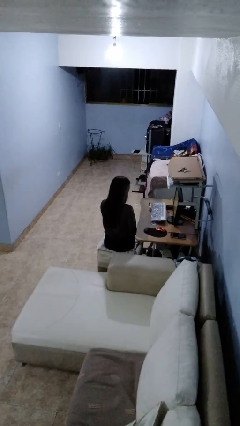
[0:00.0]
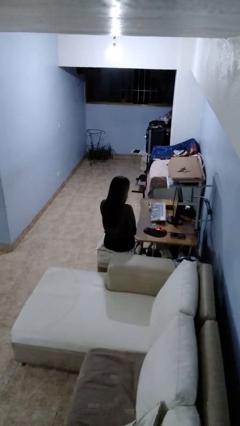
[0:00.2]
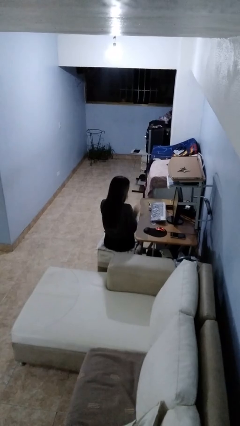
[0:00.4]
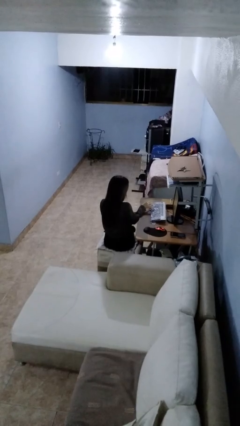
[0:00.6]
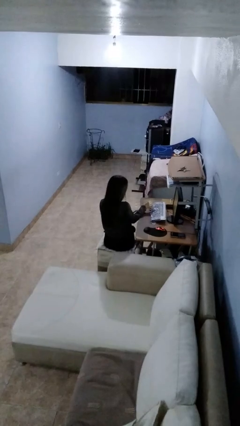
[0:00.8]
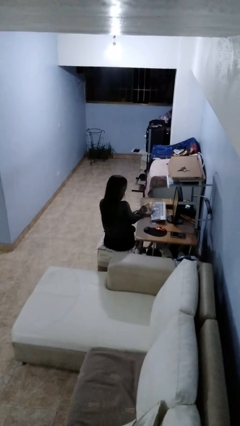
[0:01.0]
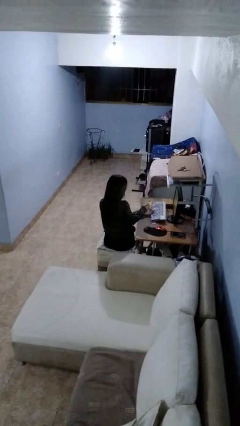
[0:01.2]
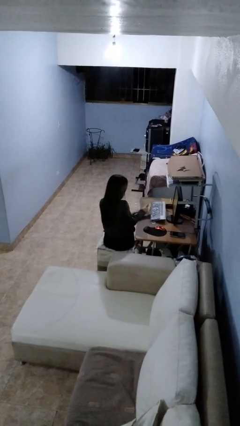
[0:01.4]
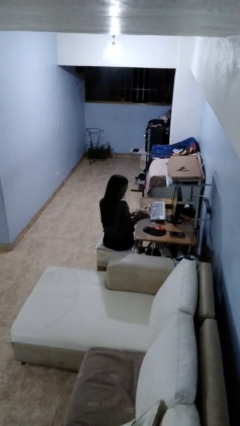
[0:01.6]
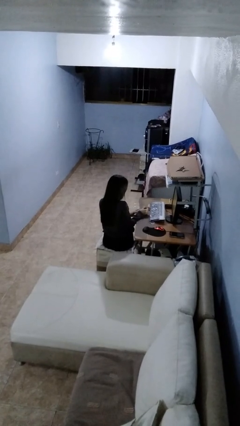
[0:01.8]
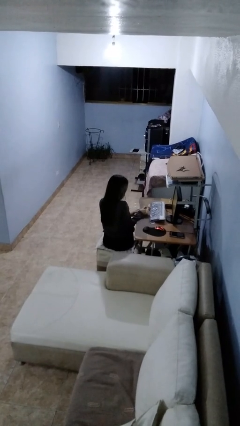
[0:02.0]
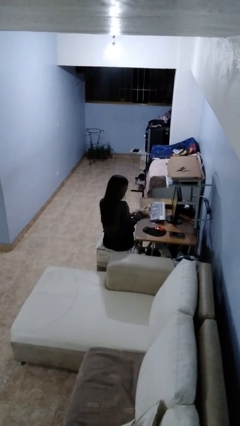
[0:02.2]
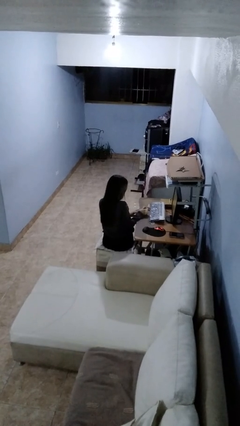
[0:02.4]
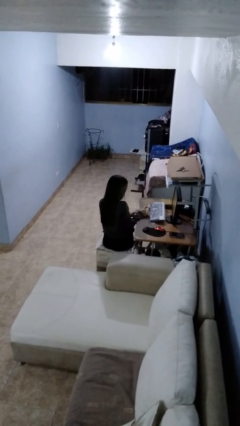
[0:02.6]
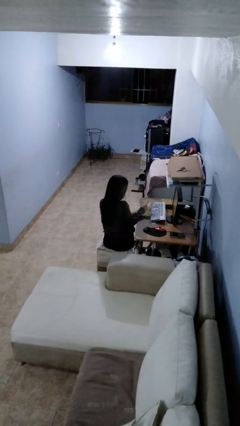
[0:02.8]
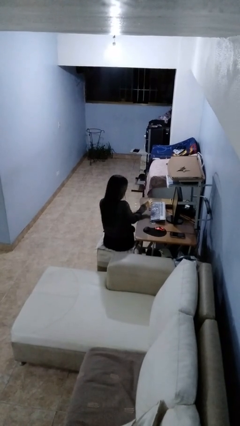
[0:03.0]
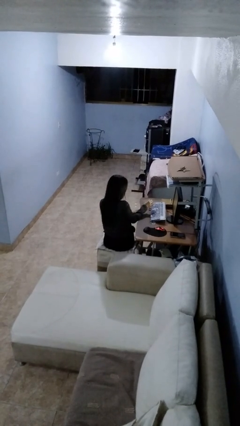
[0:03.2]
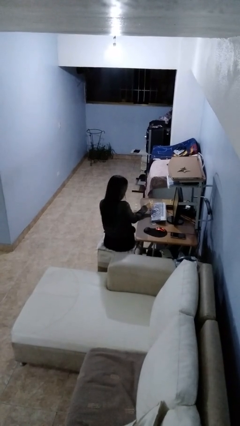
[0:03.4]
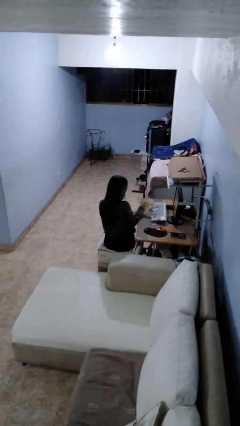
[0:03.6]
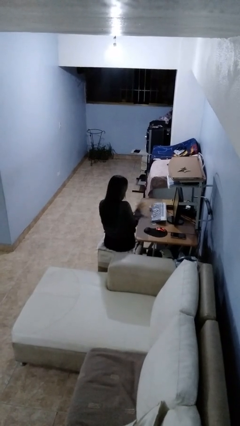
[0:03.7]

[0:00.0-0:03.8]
person paints fingernails

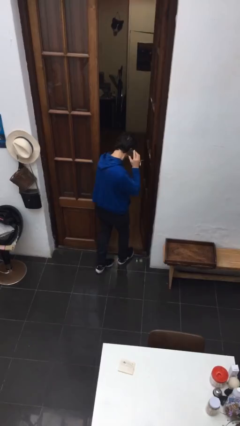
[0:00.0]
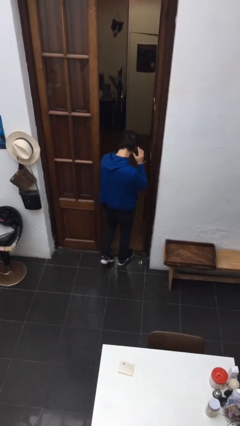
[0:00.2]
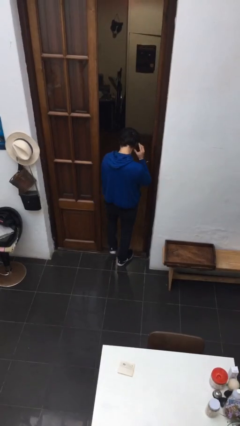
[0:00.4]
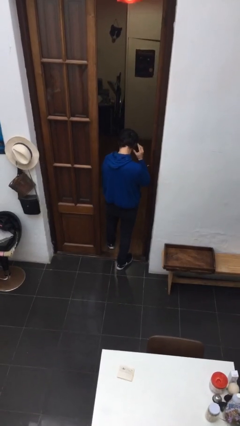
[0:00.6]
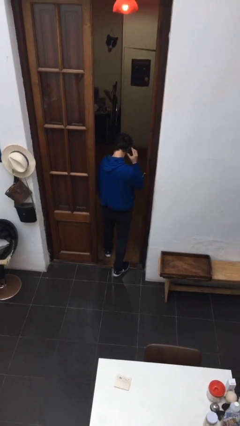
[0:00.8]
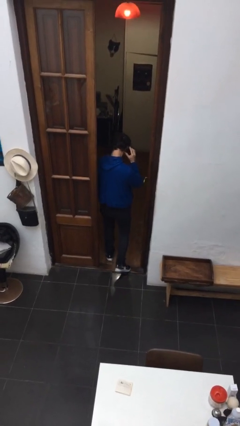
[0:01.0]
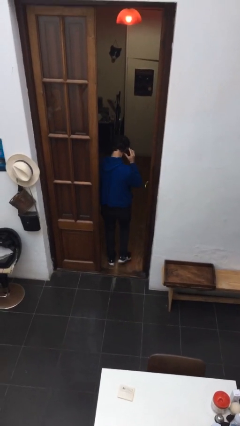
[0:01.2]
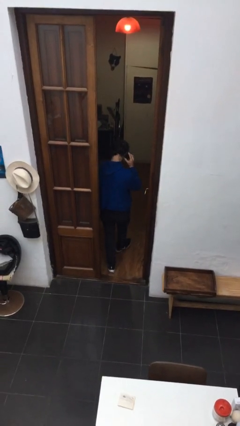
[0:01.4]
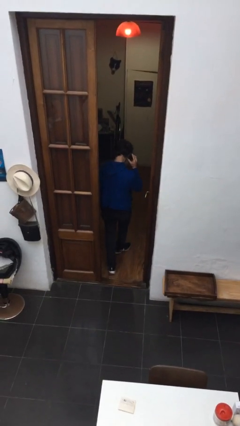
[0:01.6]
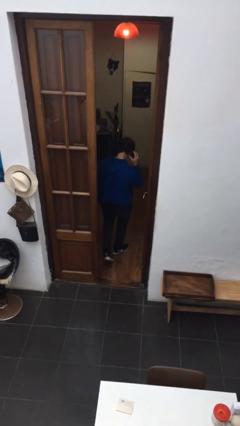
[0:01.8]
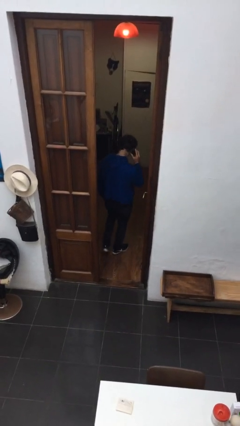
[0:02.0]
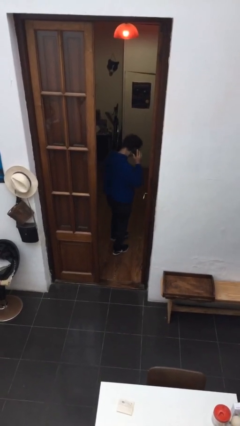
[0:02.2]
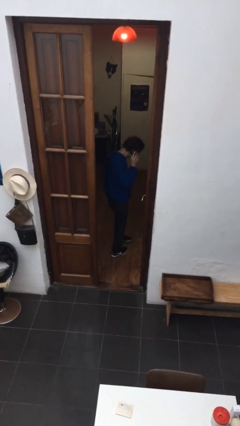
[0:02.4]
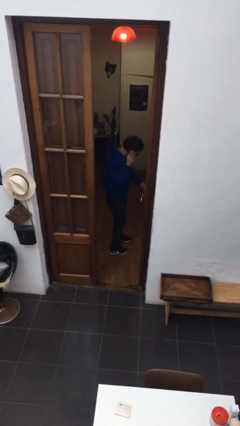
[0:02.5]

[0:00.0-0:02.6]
person exits scene through structure

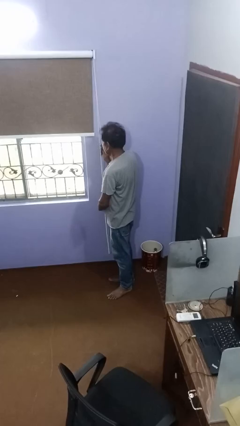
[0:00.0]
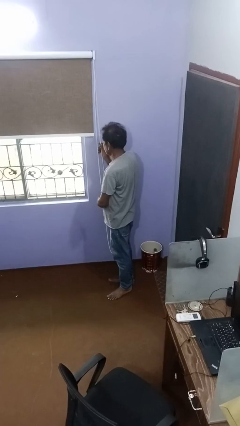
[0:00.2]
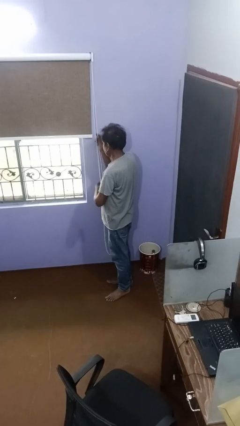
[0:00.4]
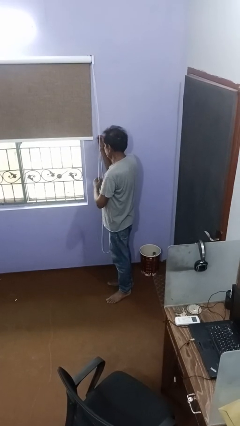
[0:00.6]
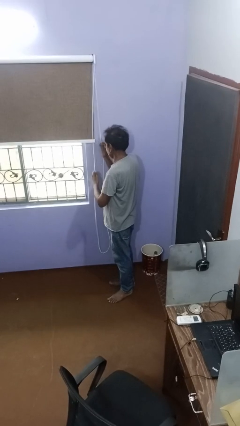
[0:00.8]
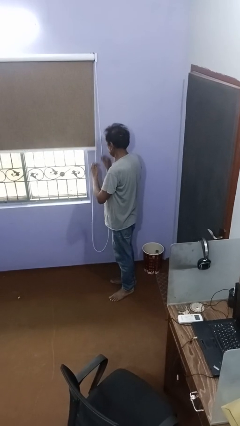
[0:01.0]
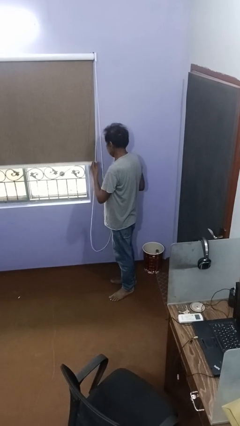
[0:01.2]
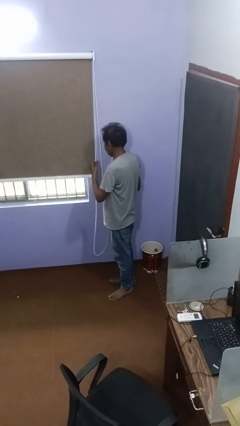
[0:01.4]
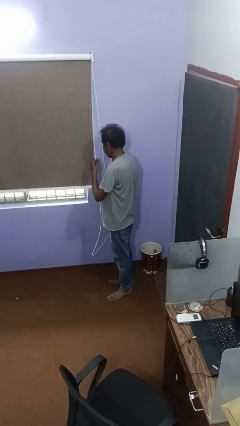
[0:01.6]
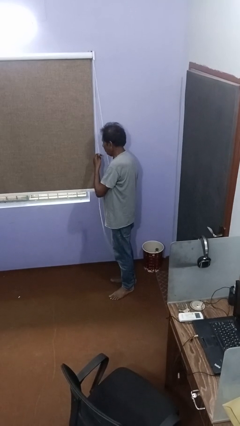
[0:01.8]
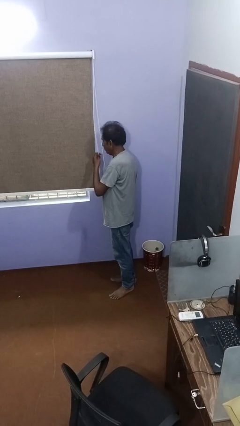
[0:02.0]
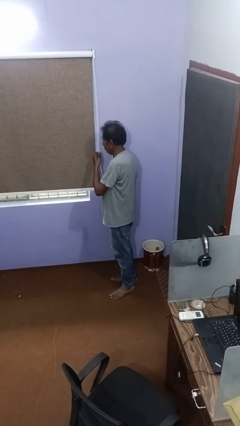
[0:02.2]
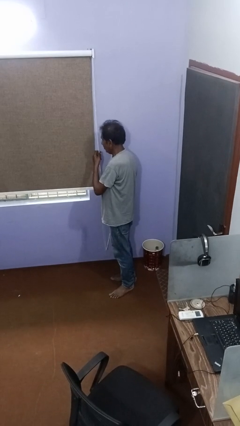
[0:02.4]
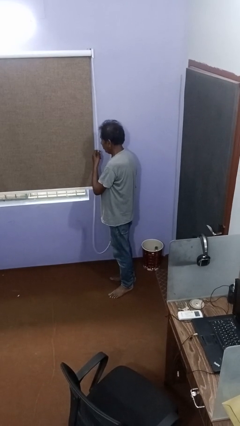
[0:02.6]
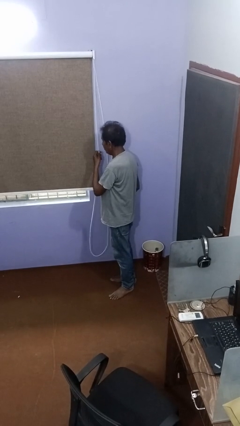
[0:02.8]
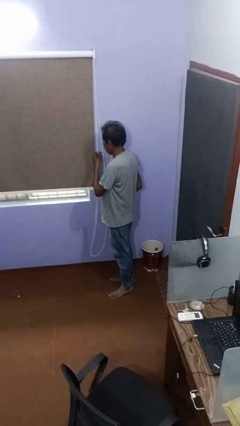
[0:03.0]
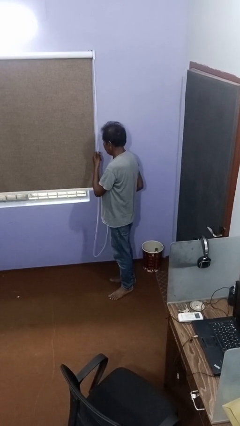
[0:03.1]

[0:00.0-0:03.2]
person closes curtains

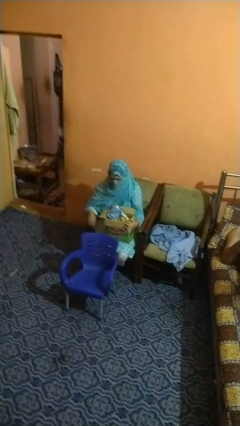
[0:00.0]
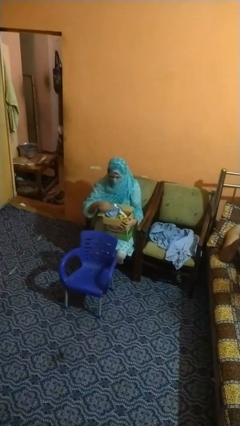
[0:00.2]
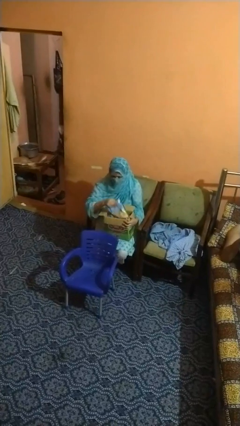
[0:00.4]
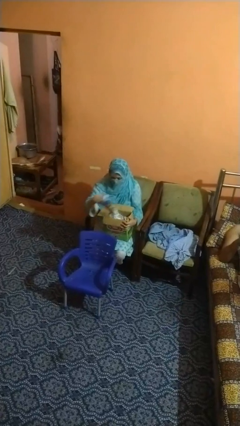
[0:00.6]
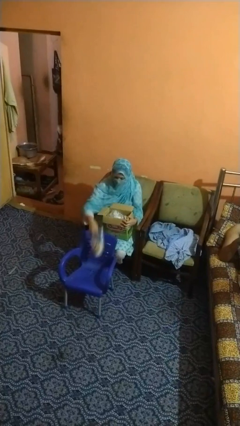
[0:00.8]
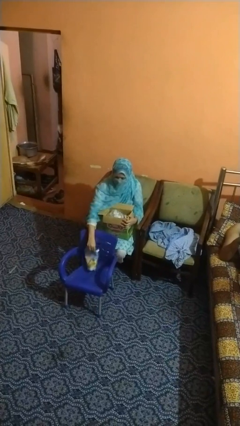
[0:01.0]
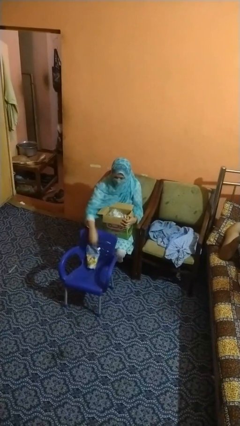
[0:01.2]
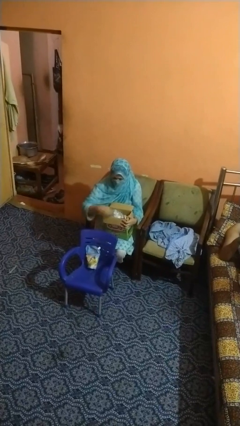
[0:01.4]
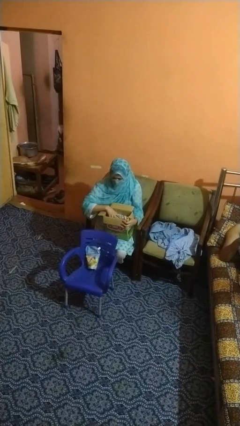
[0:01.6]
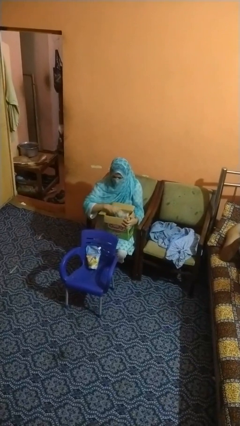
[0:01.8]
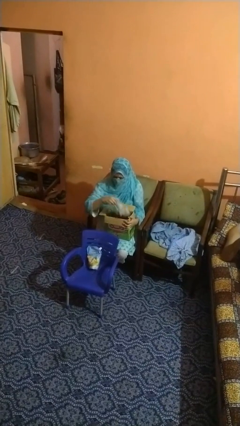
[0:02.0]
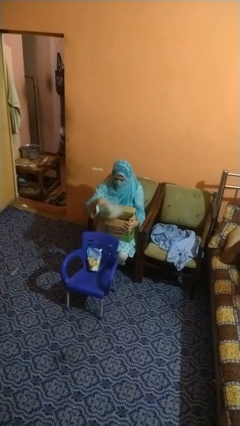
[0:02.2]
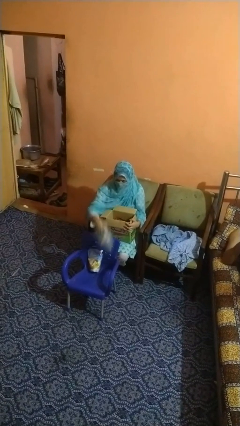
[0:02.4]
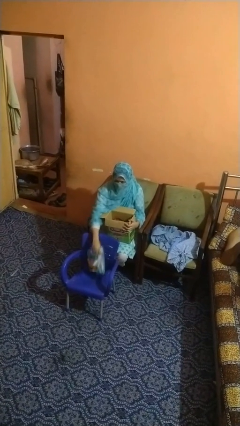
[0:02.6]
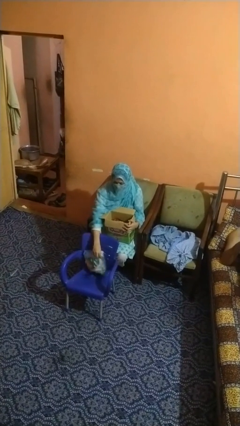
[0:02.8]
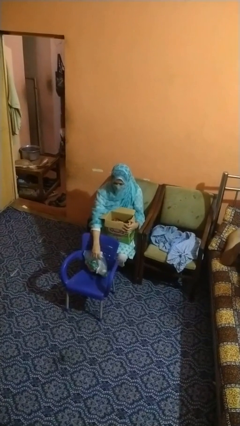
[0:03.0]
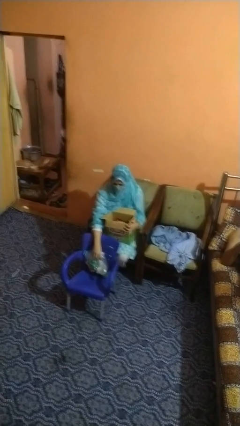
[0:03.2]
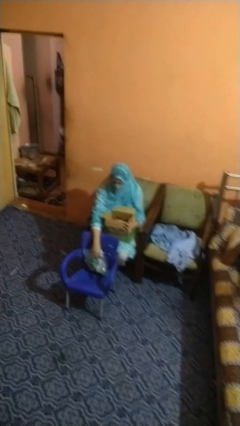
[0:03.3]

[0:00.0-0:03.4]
person takes object from box

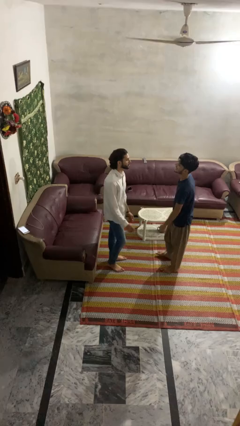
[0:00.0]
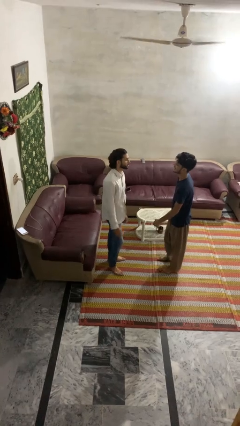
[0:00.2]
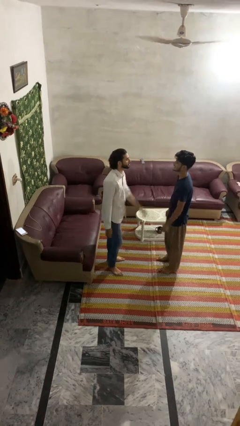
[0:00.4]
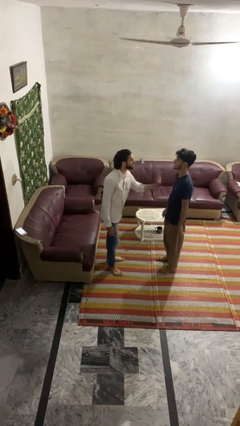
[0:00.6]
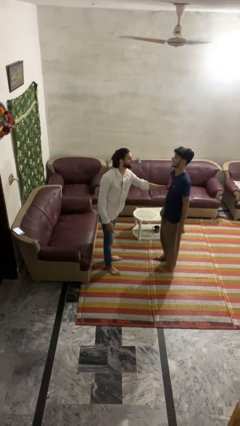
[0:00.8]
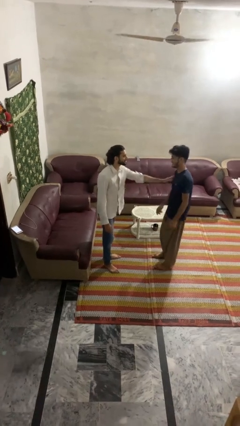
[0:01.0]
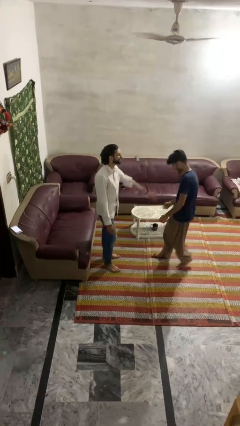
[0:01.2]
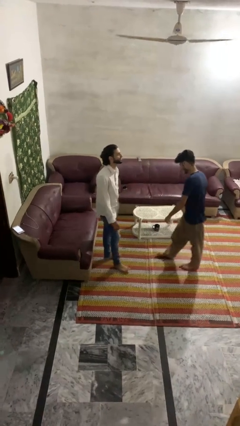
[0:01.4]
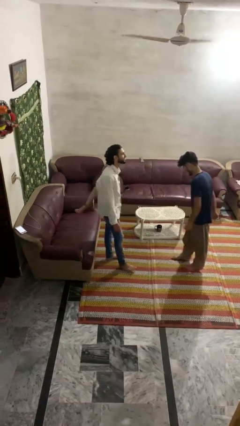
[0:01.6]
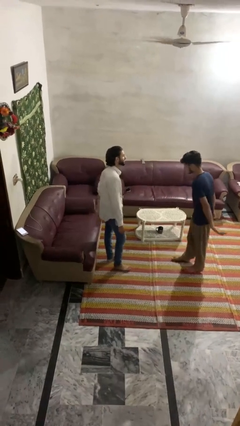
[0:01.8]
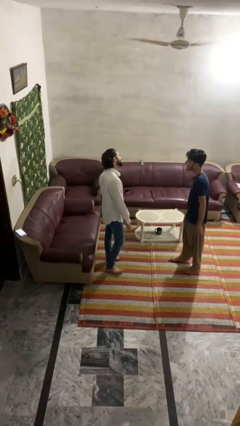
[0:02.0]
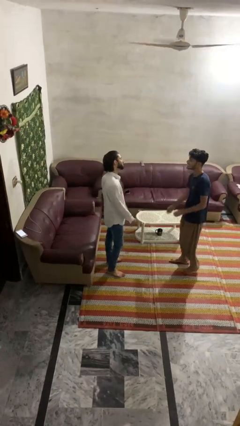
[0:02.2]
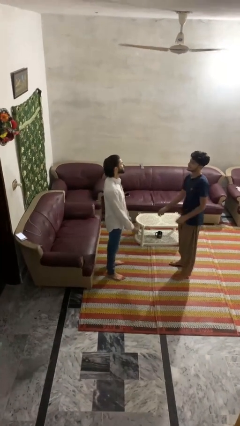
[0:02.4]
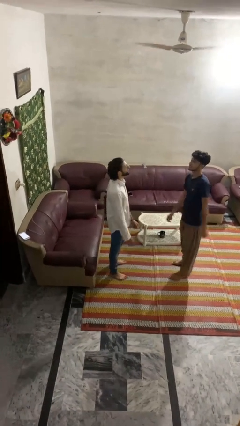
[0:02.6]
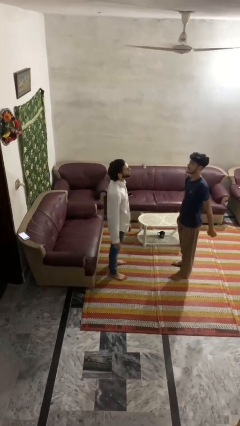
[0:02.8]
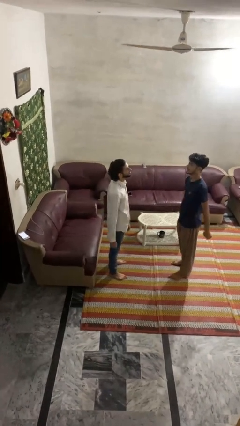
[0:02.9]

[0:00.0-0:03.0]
person shoves person

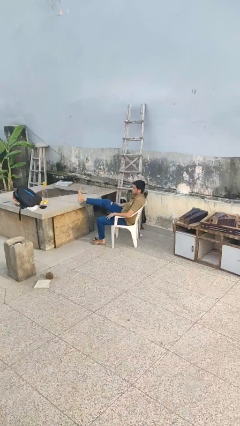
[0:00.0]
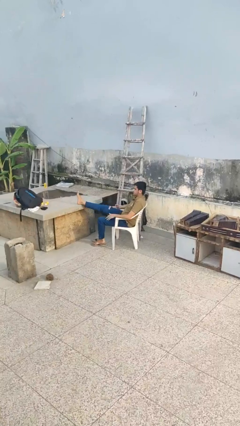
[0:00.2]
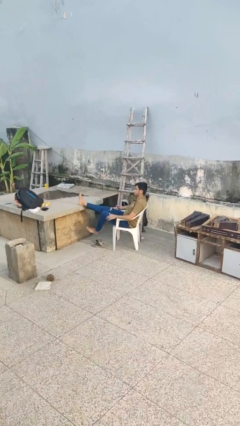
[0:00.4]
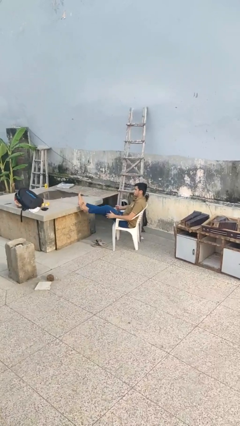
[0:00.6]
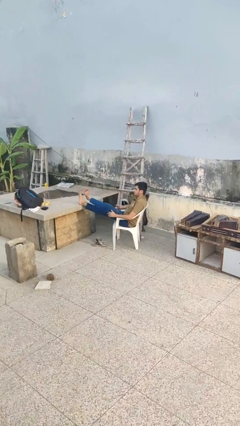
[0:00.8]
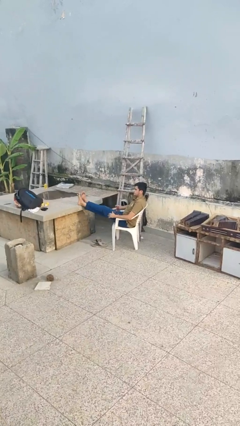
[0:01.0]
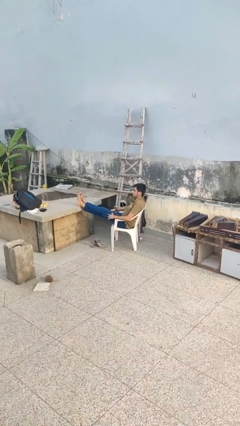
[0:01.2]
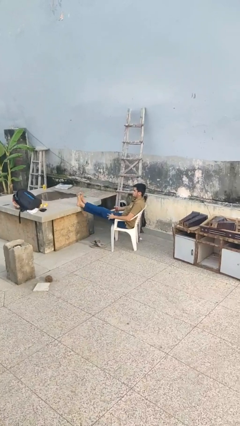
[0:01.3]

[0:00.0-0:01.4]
person puts feet up

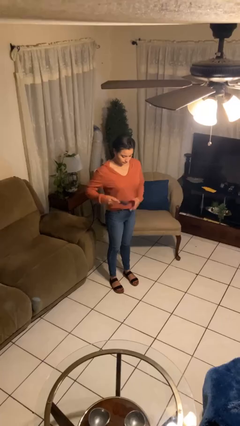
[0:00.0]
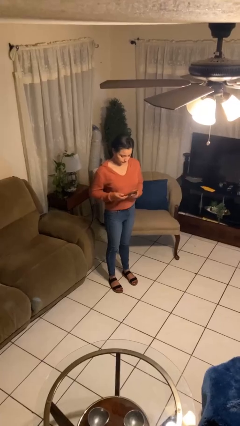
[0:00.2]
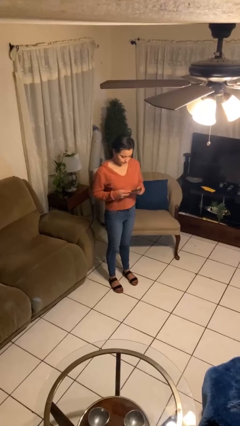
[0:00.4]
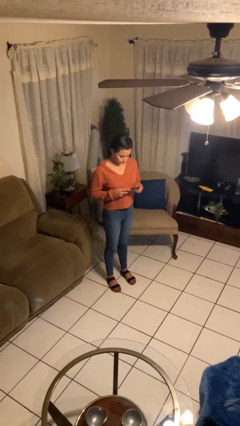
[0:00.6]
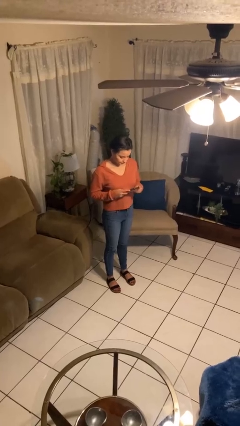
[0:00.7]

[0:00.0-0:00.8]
person takes phone from pocket
